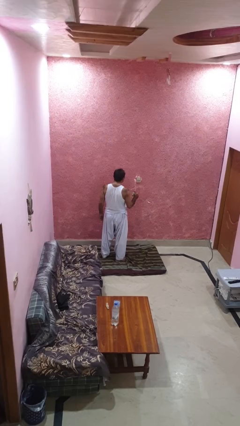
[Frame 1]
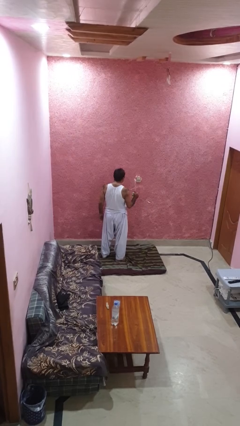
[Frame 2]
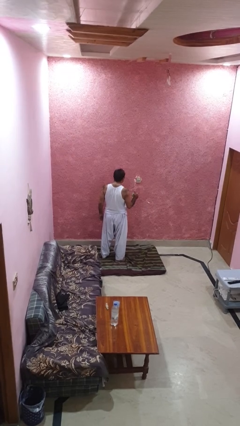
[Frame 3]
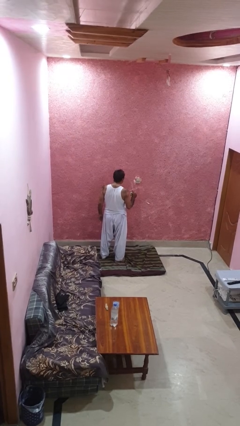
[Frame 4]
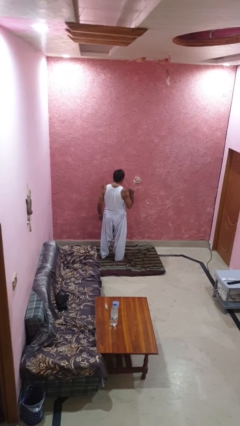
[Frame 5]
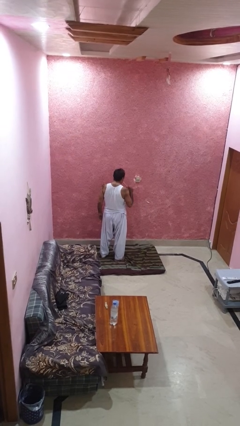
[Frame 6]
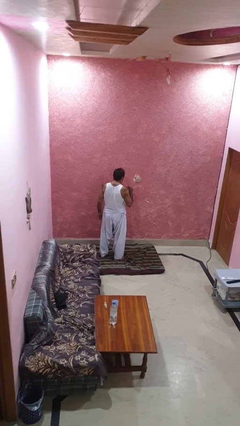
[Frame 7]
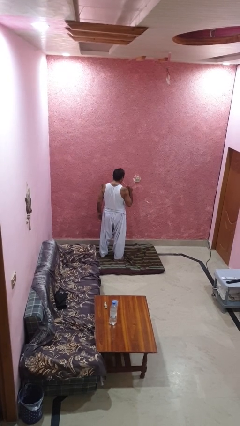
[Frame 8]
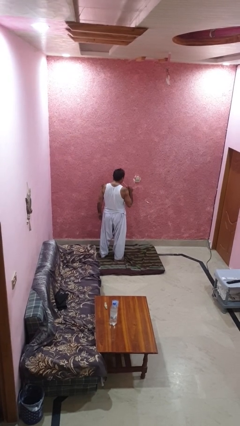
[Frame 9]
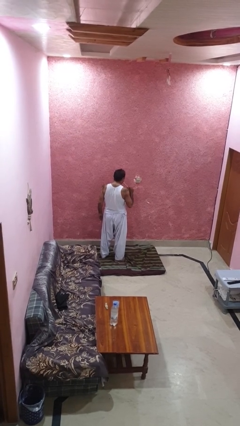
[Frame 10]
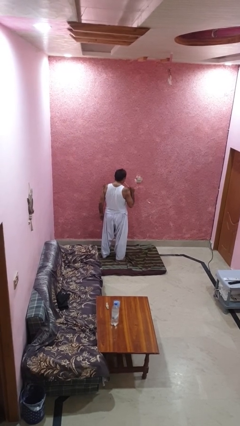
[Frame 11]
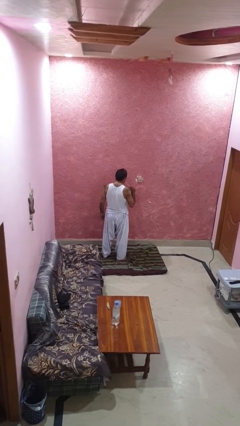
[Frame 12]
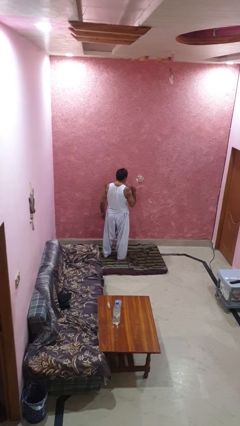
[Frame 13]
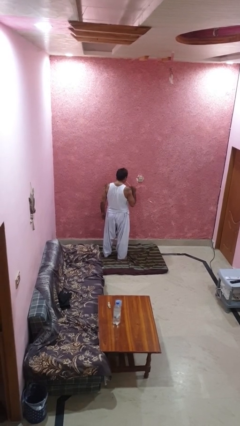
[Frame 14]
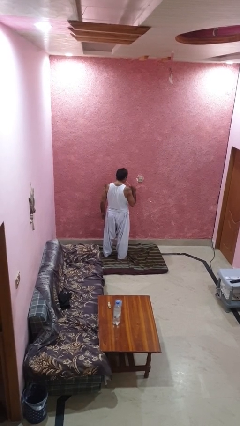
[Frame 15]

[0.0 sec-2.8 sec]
person drinks from straw

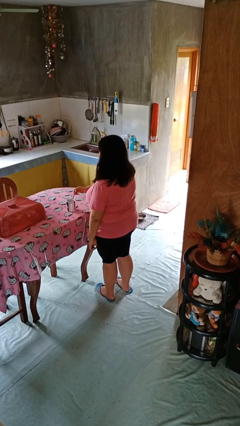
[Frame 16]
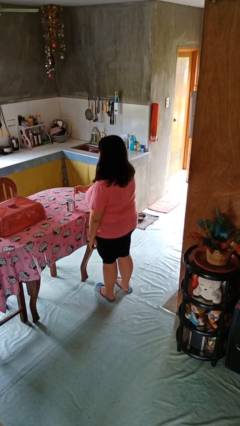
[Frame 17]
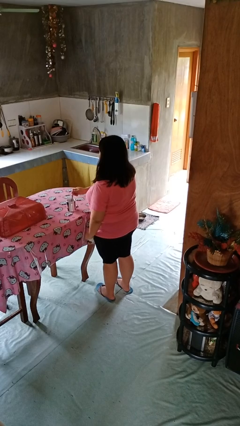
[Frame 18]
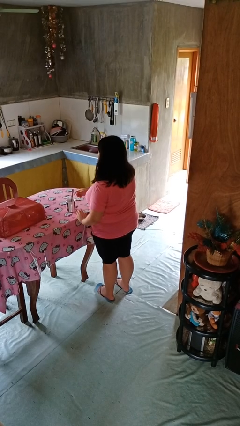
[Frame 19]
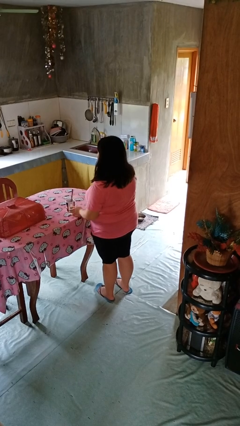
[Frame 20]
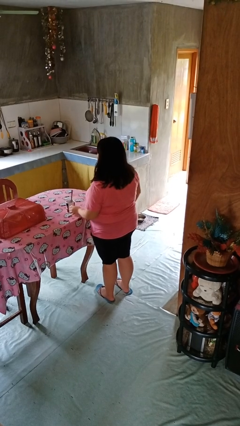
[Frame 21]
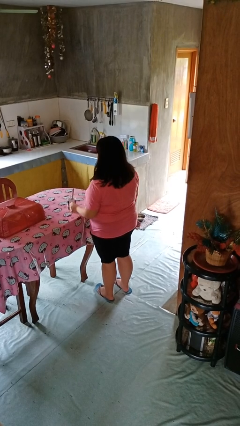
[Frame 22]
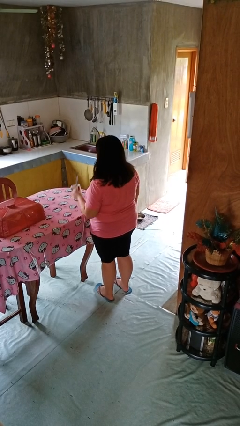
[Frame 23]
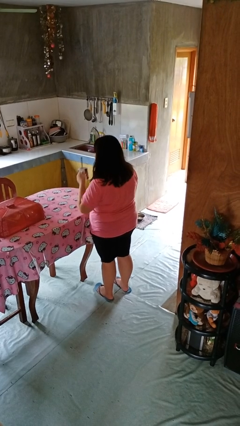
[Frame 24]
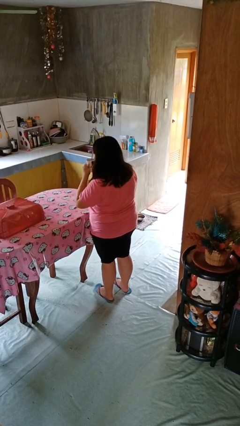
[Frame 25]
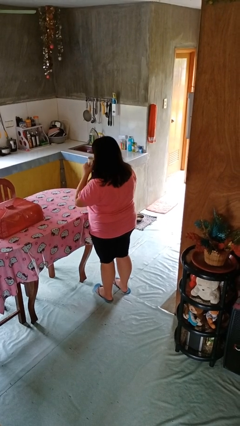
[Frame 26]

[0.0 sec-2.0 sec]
person stirs mug

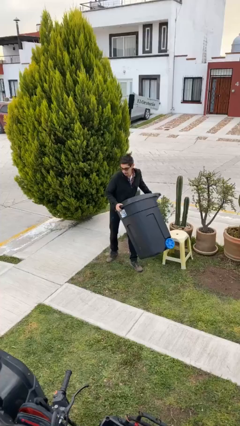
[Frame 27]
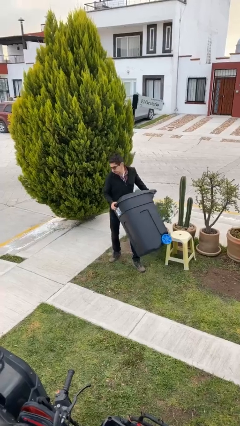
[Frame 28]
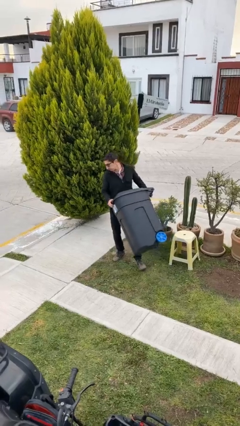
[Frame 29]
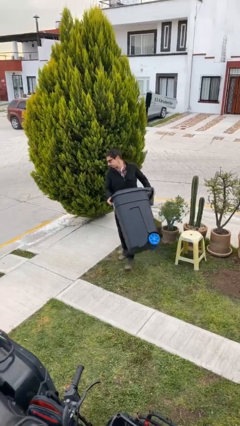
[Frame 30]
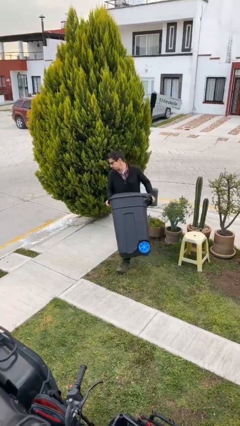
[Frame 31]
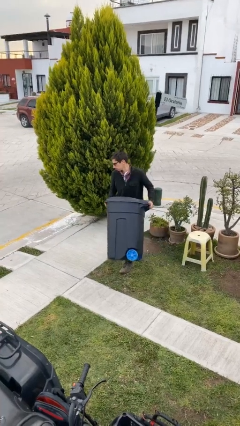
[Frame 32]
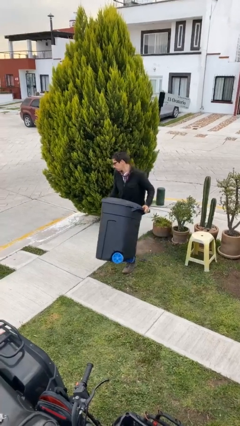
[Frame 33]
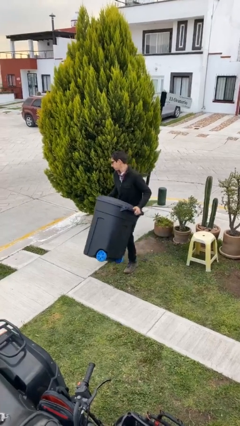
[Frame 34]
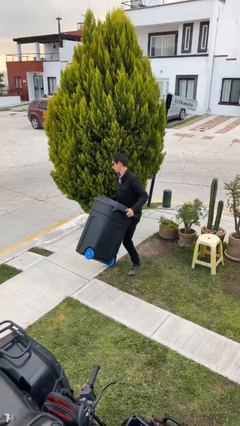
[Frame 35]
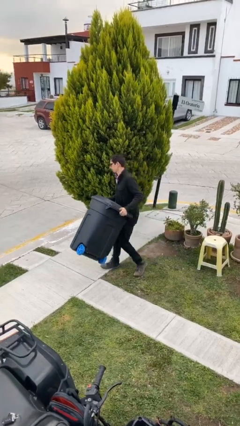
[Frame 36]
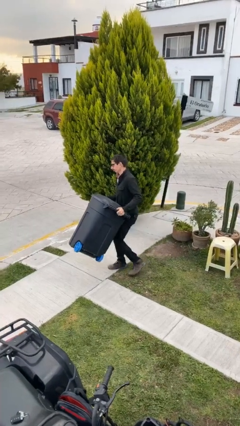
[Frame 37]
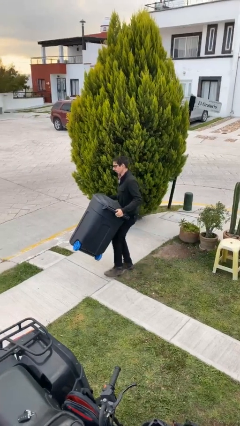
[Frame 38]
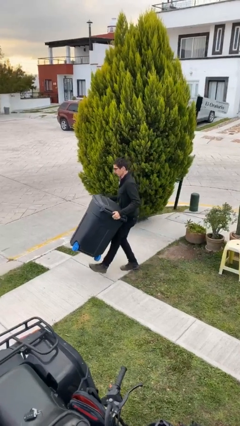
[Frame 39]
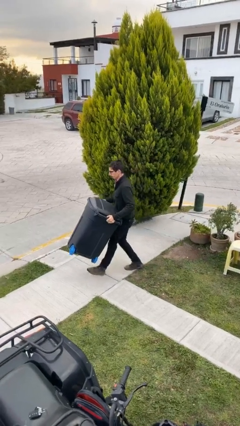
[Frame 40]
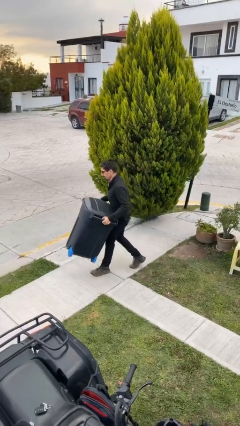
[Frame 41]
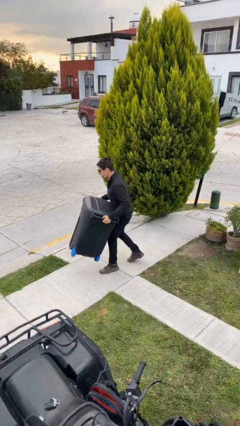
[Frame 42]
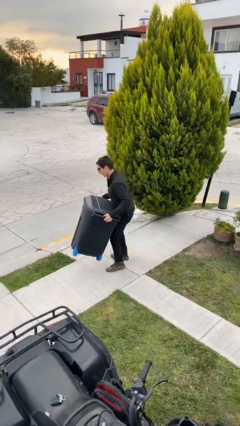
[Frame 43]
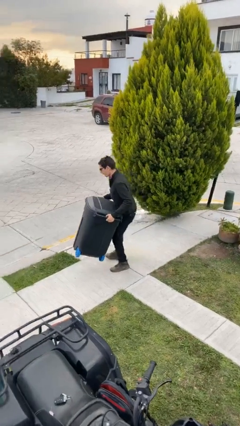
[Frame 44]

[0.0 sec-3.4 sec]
person carries heavy object

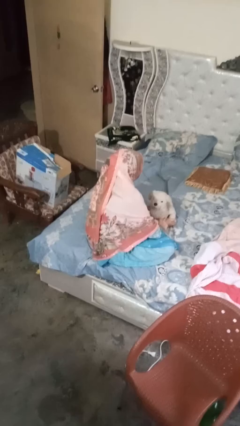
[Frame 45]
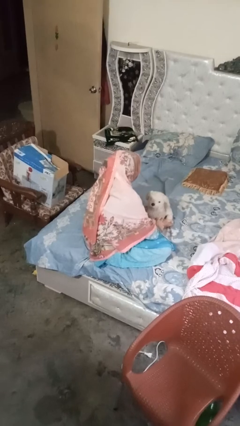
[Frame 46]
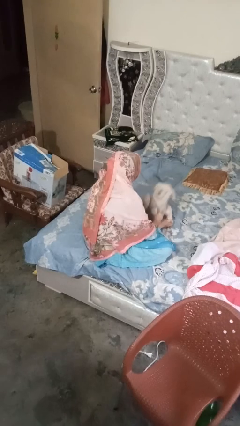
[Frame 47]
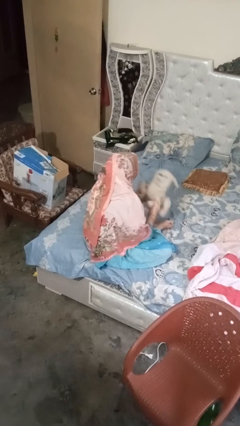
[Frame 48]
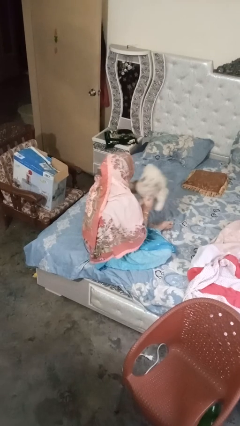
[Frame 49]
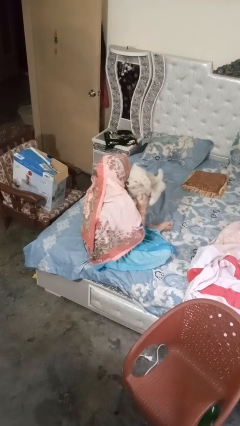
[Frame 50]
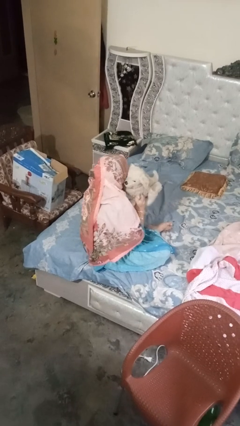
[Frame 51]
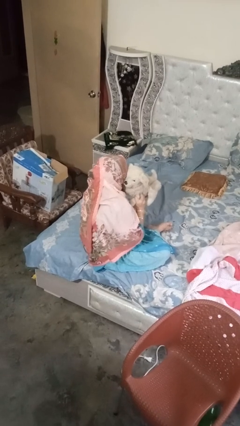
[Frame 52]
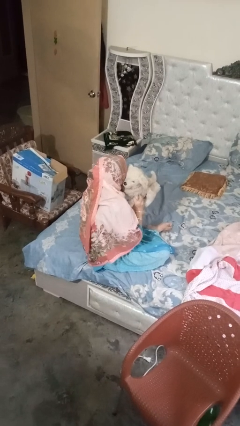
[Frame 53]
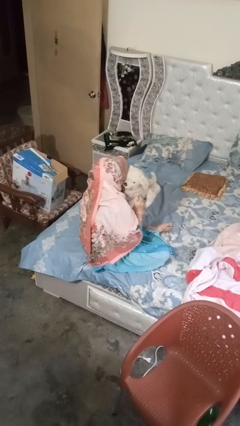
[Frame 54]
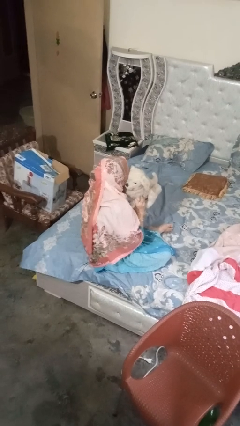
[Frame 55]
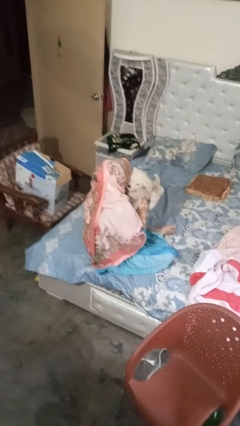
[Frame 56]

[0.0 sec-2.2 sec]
person hugs stuffed animal

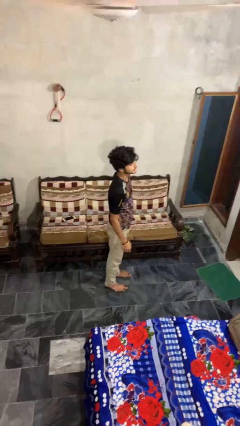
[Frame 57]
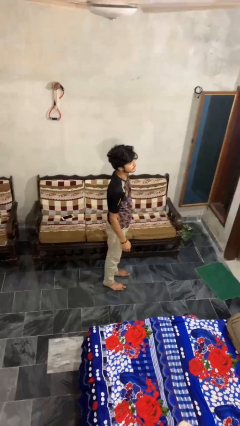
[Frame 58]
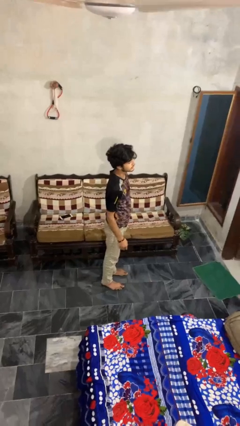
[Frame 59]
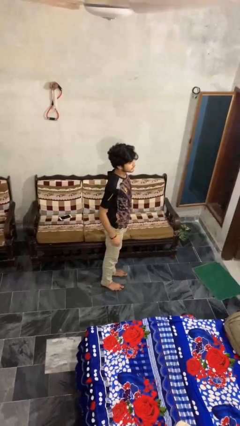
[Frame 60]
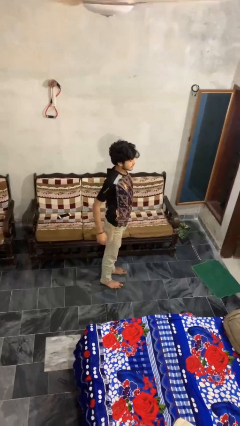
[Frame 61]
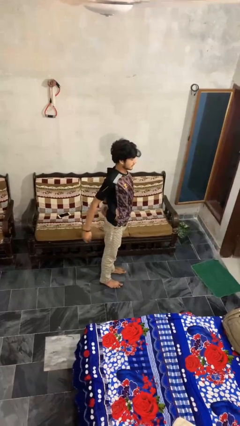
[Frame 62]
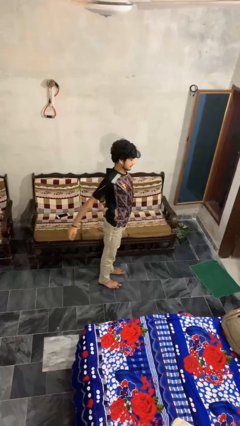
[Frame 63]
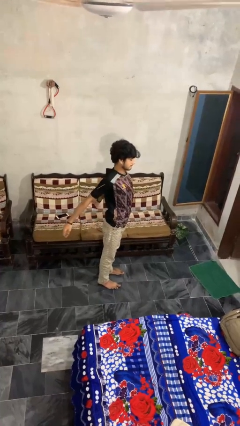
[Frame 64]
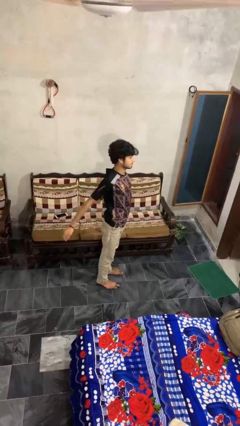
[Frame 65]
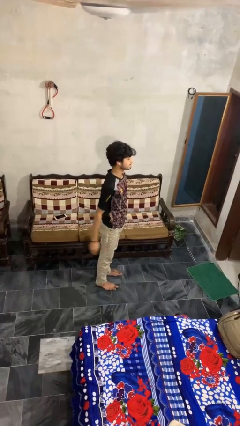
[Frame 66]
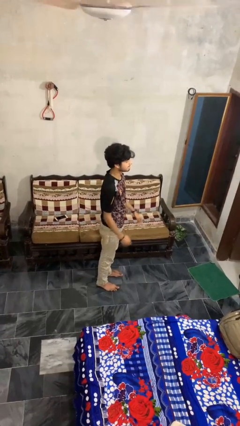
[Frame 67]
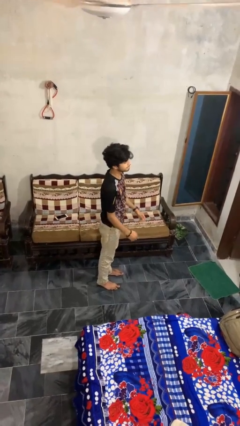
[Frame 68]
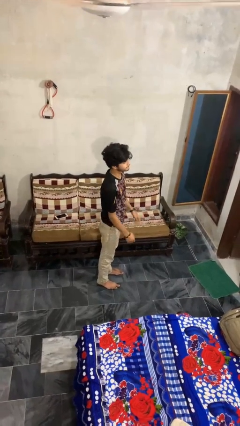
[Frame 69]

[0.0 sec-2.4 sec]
person stretches back

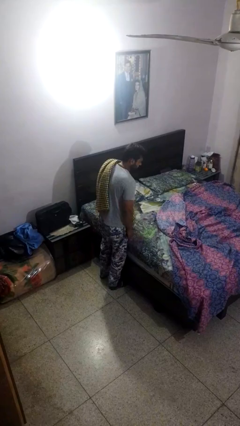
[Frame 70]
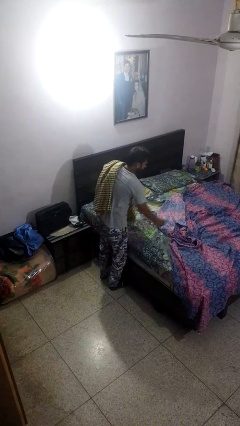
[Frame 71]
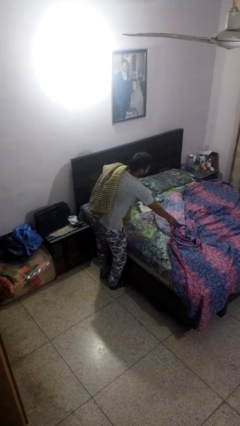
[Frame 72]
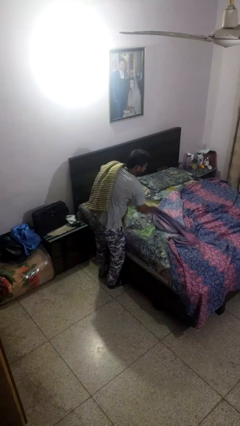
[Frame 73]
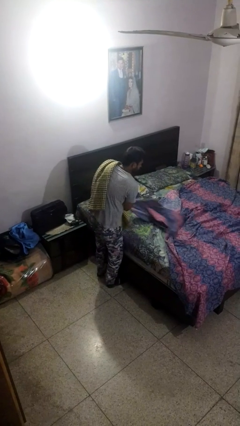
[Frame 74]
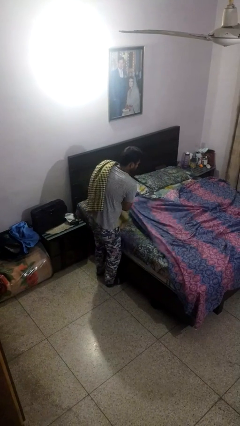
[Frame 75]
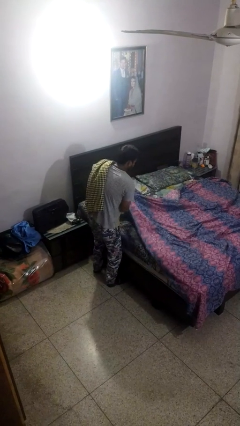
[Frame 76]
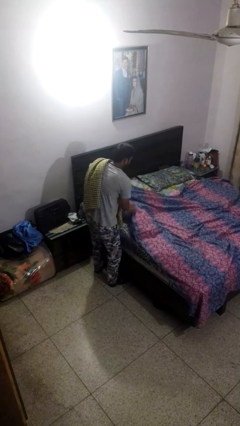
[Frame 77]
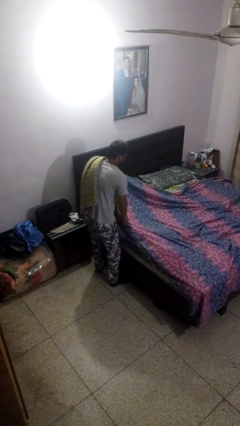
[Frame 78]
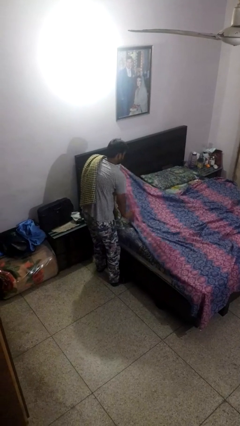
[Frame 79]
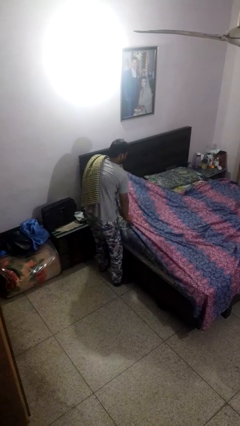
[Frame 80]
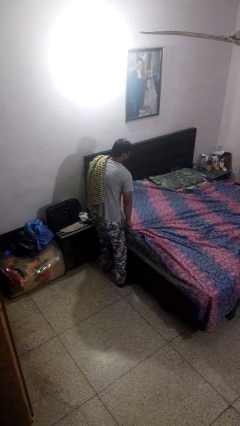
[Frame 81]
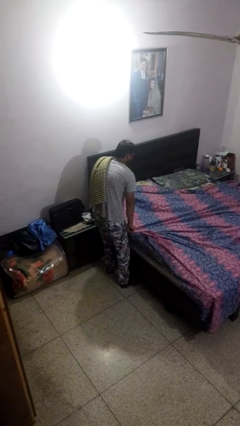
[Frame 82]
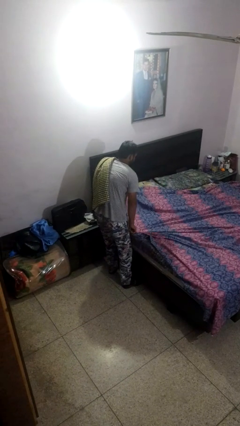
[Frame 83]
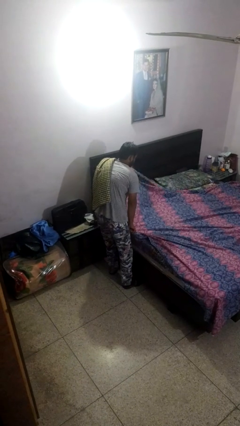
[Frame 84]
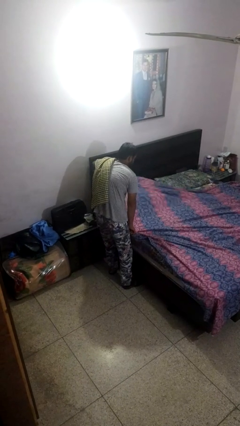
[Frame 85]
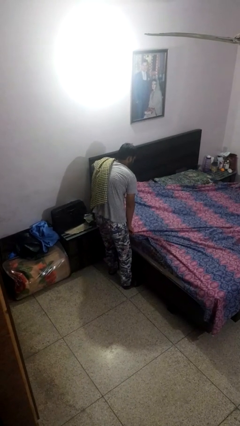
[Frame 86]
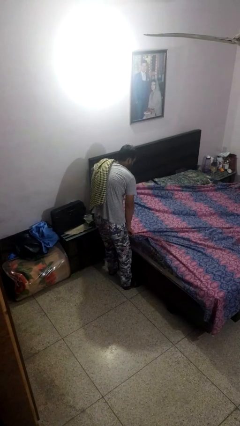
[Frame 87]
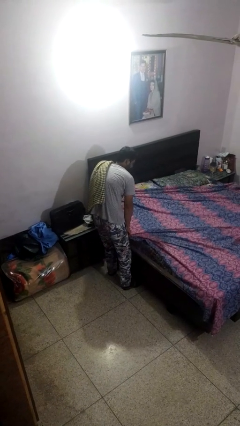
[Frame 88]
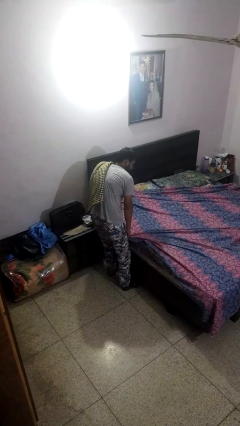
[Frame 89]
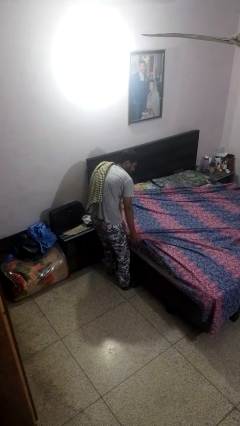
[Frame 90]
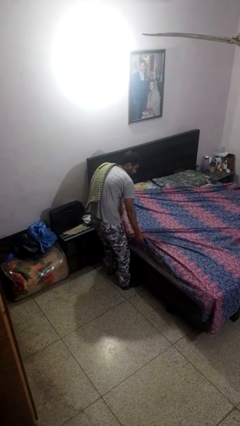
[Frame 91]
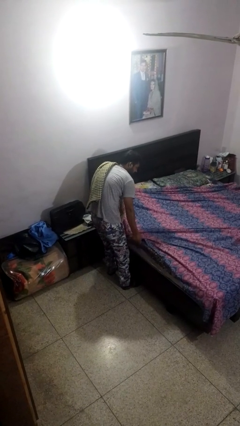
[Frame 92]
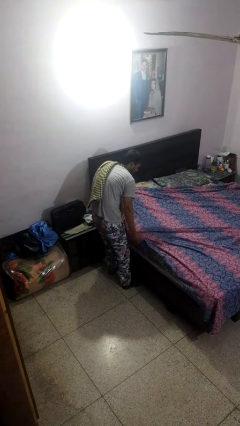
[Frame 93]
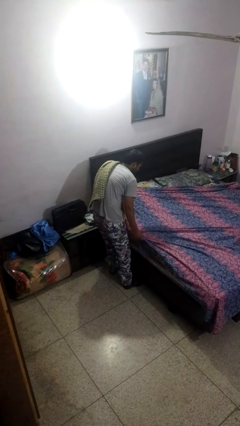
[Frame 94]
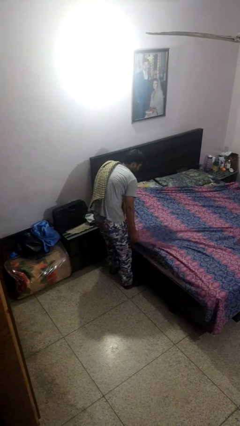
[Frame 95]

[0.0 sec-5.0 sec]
person makes bed
